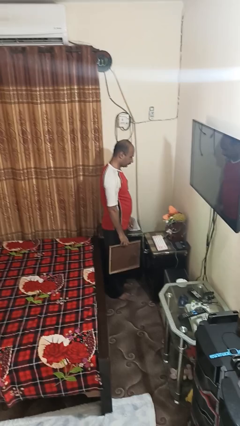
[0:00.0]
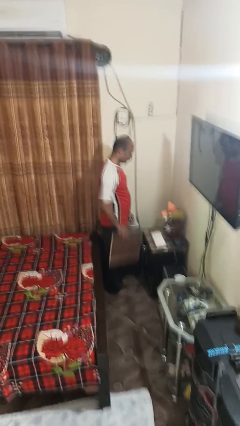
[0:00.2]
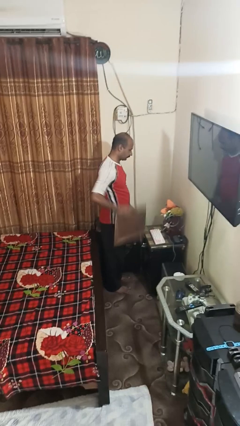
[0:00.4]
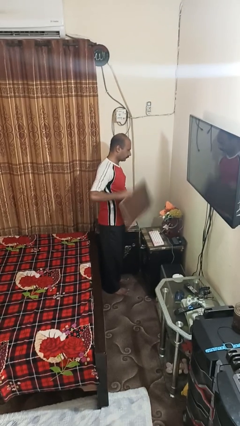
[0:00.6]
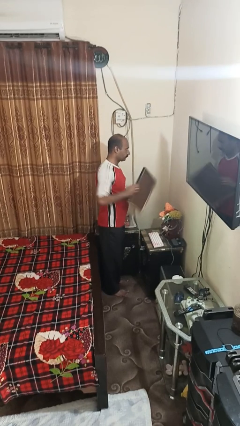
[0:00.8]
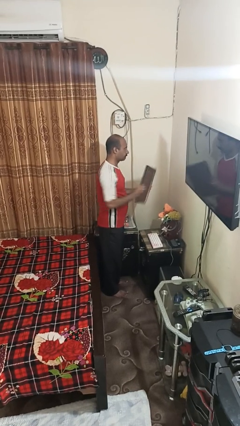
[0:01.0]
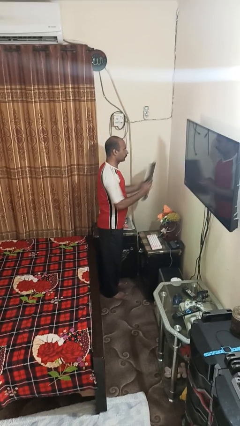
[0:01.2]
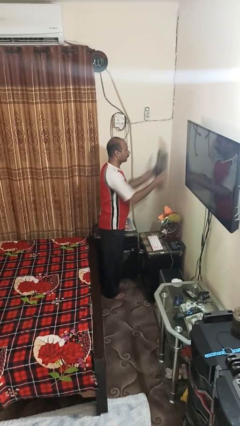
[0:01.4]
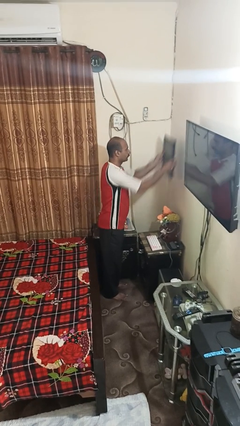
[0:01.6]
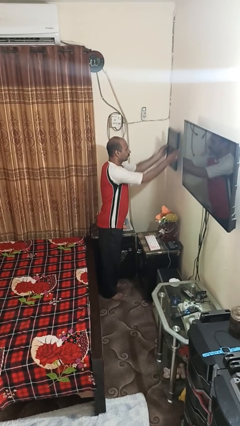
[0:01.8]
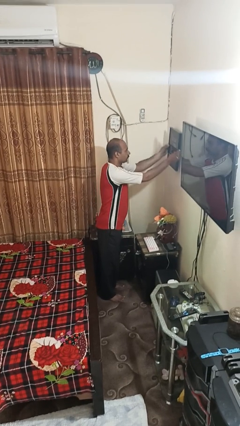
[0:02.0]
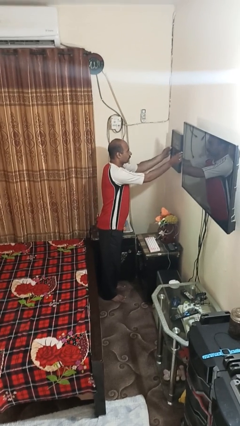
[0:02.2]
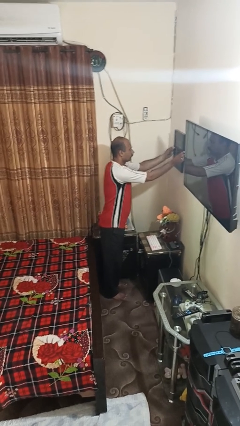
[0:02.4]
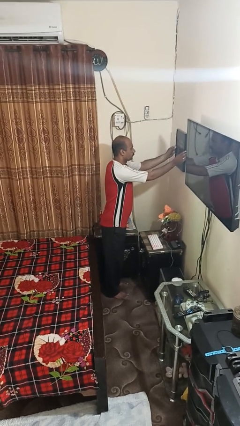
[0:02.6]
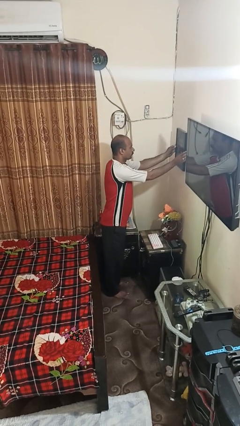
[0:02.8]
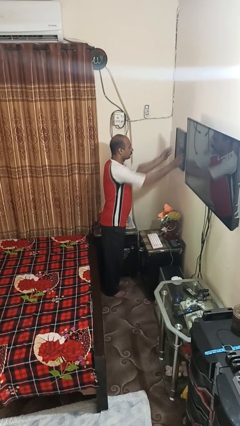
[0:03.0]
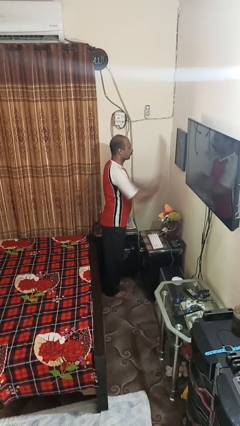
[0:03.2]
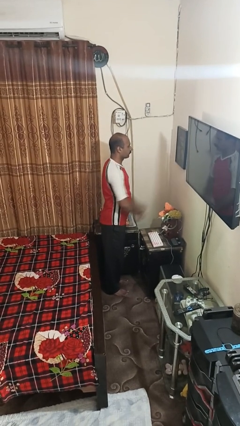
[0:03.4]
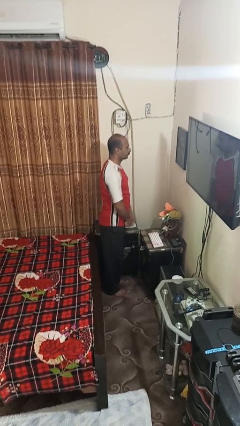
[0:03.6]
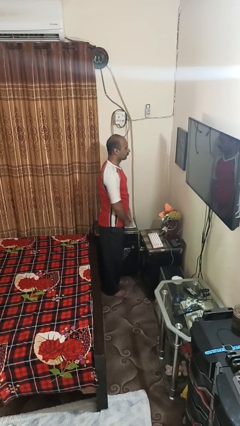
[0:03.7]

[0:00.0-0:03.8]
person puts up picture frame

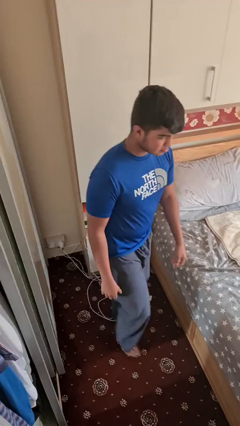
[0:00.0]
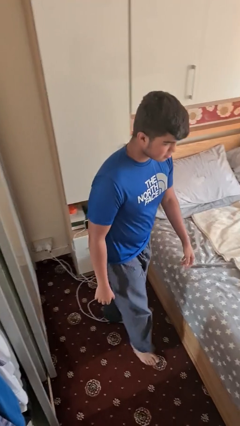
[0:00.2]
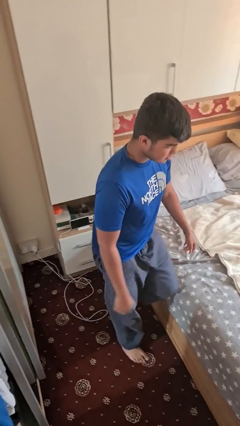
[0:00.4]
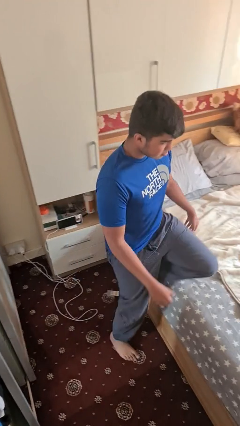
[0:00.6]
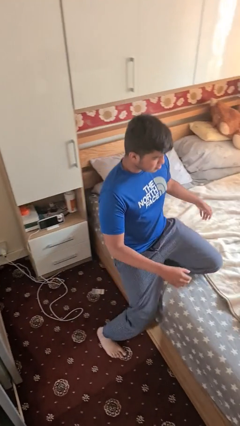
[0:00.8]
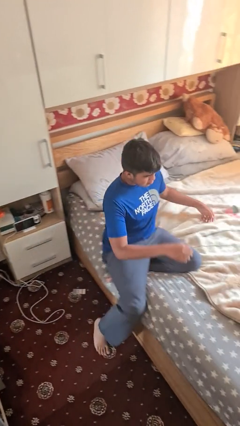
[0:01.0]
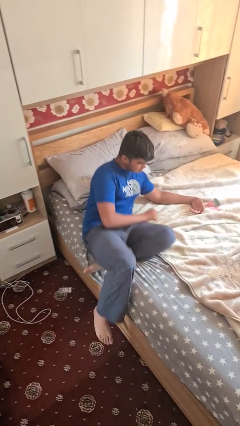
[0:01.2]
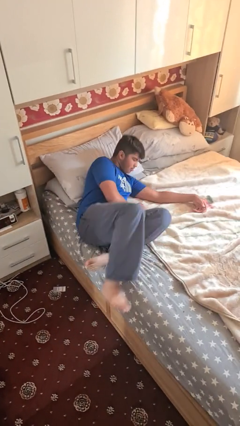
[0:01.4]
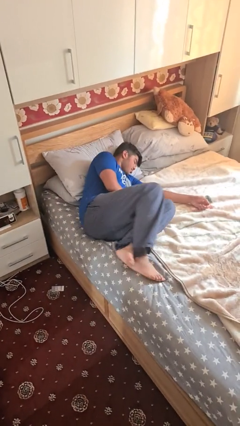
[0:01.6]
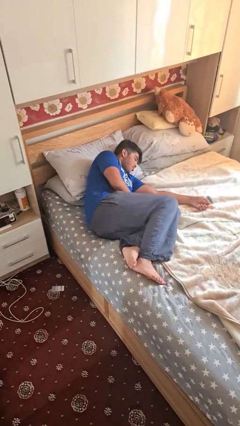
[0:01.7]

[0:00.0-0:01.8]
person lies down on bed

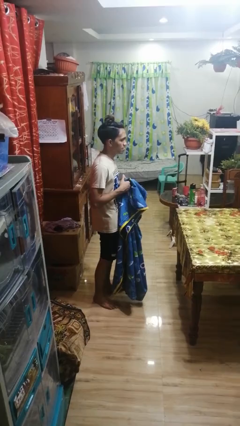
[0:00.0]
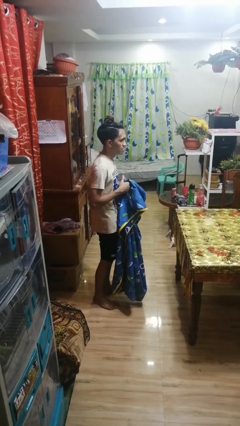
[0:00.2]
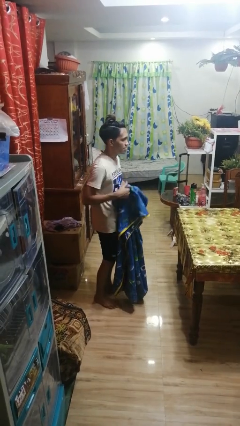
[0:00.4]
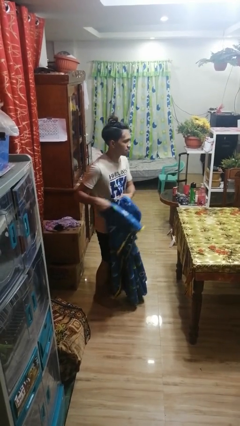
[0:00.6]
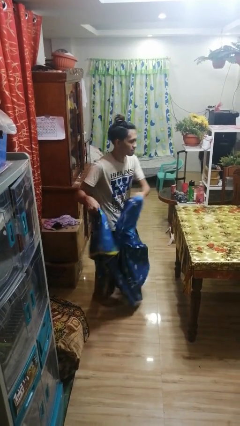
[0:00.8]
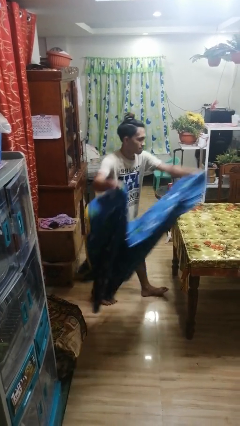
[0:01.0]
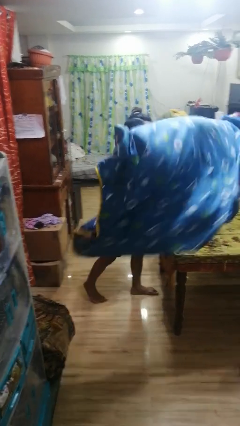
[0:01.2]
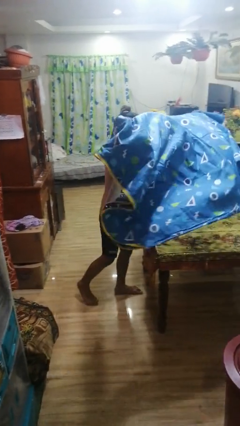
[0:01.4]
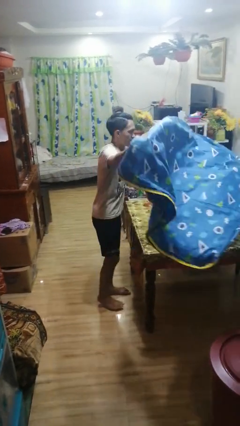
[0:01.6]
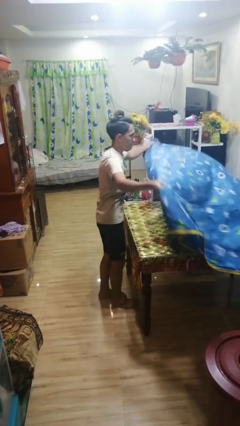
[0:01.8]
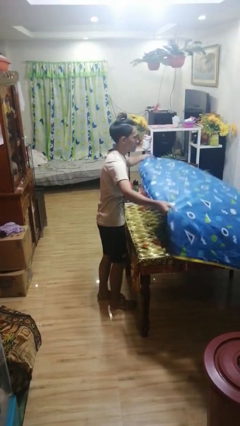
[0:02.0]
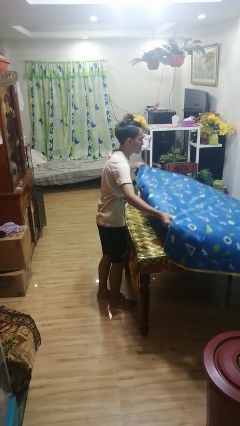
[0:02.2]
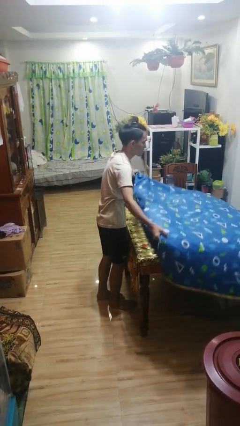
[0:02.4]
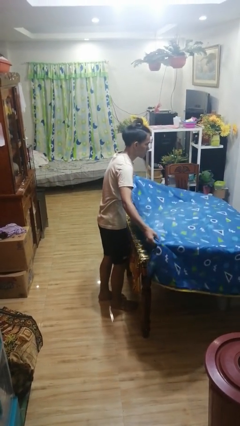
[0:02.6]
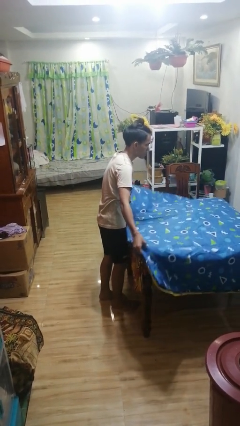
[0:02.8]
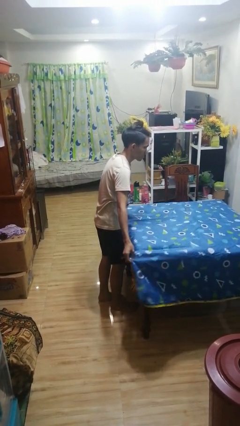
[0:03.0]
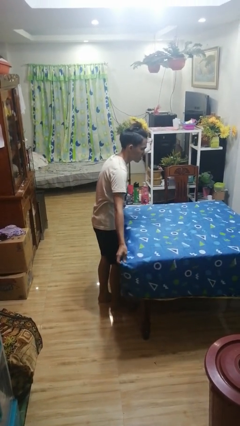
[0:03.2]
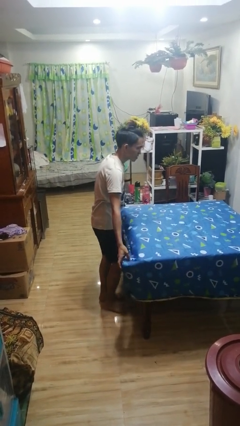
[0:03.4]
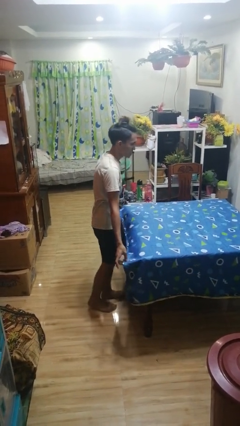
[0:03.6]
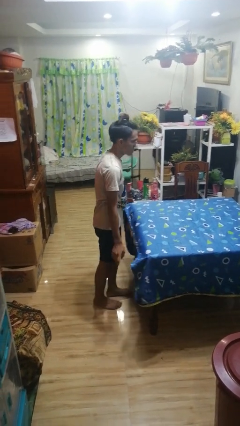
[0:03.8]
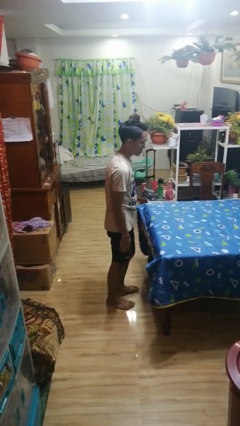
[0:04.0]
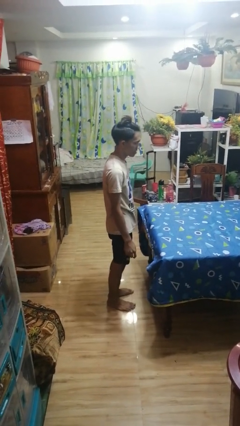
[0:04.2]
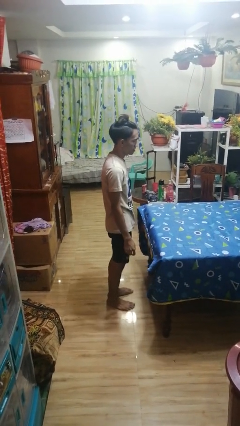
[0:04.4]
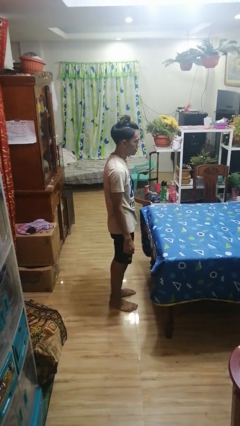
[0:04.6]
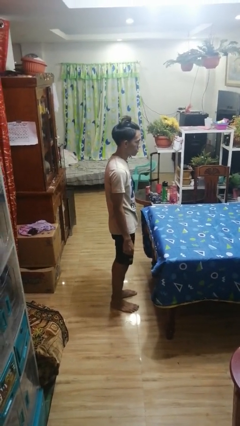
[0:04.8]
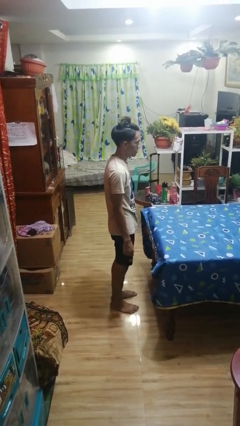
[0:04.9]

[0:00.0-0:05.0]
person spreads tablecloth

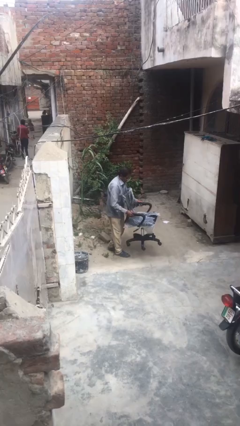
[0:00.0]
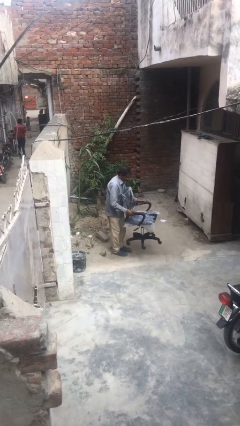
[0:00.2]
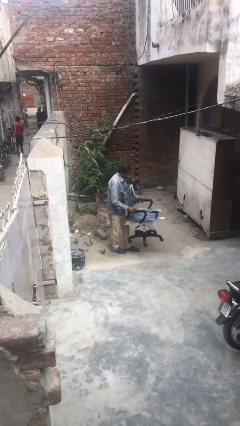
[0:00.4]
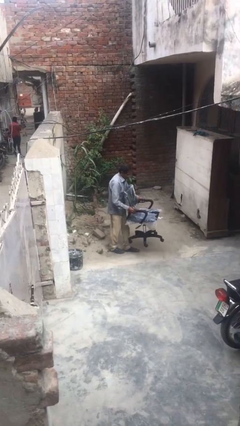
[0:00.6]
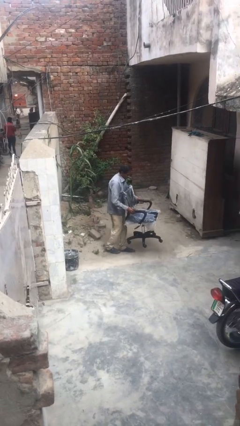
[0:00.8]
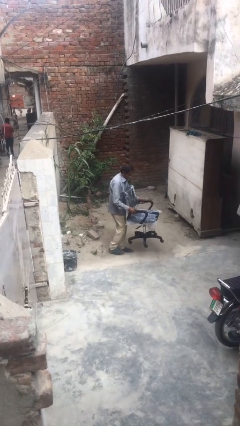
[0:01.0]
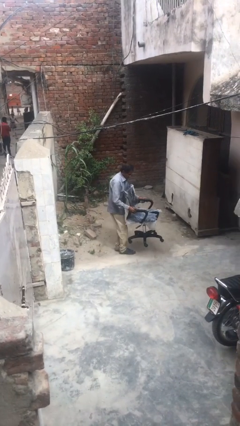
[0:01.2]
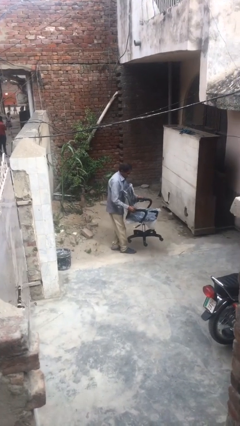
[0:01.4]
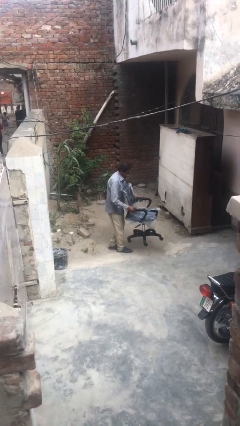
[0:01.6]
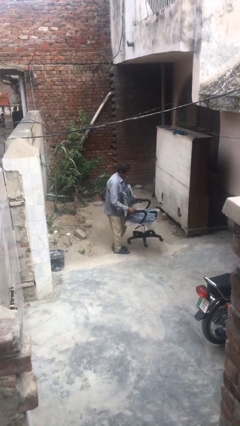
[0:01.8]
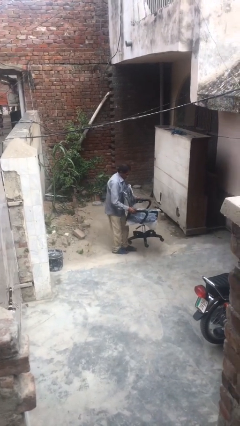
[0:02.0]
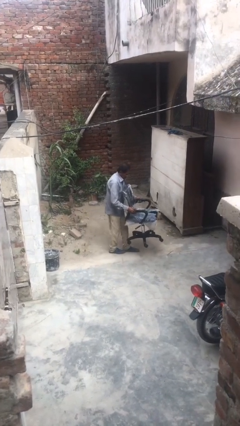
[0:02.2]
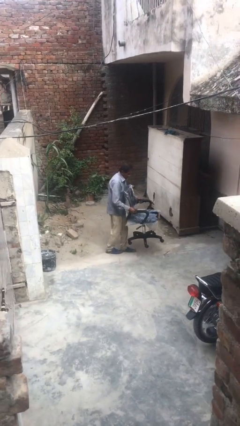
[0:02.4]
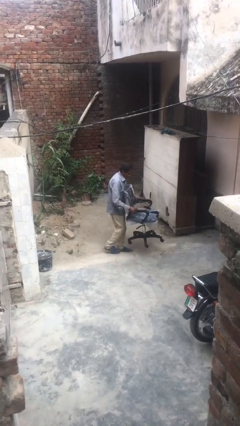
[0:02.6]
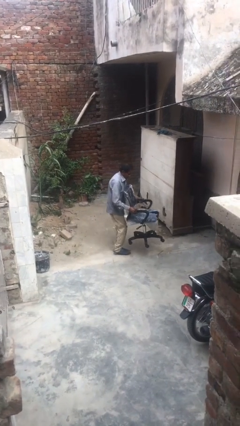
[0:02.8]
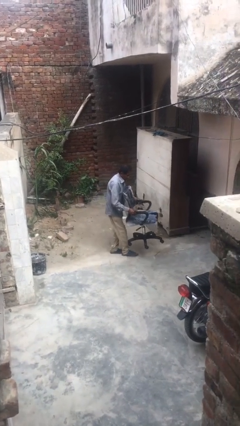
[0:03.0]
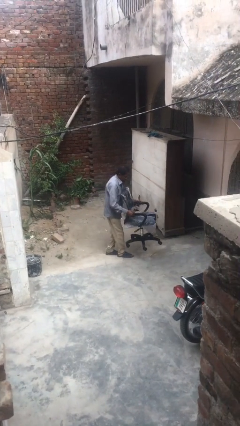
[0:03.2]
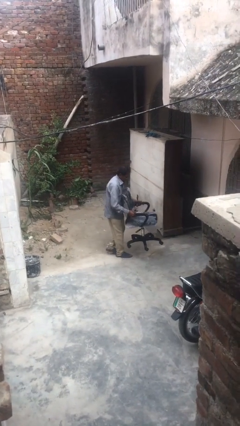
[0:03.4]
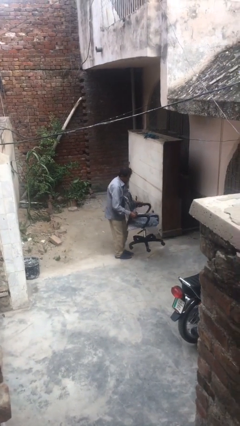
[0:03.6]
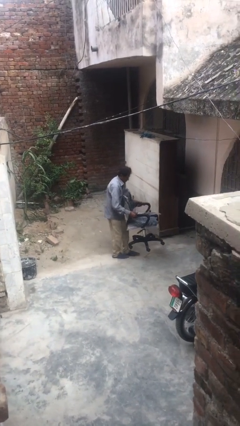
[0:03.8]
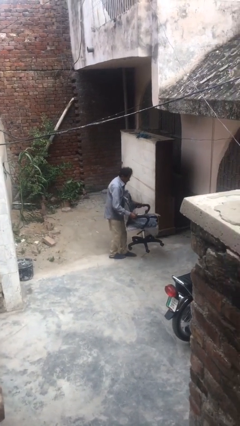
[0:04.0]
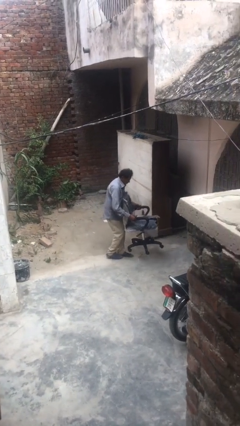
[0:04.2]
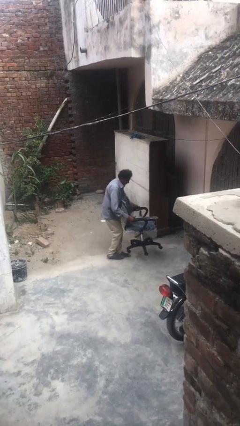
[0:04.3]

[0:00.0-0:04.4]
person carries heavy object

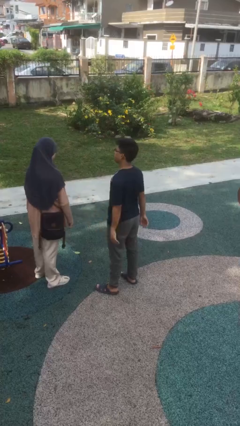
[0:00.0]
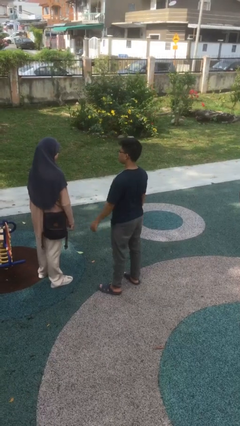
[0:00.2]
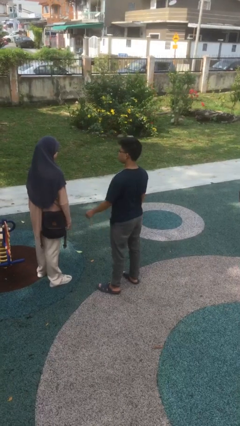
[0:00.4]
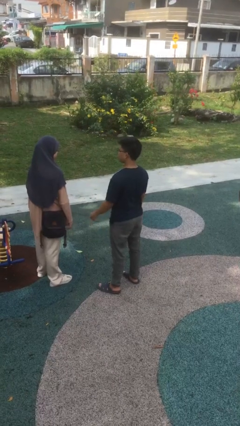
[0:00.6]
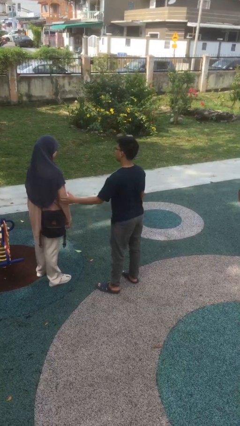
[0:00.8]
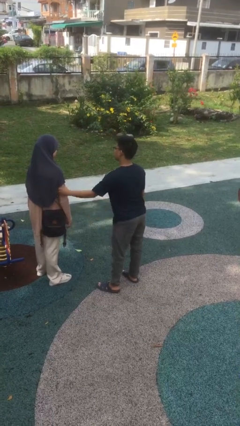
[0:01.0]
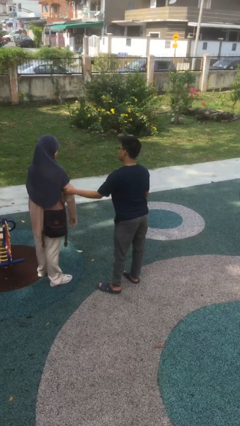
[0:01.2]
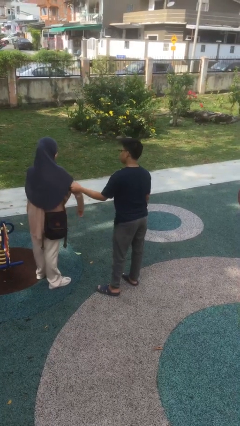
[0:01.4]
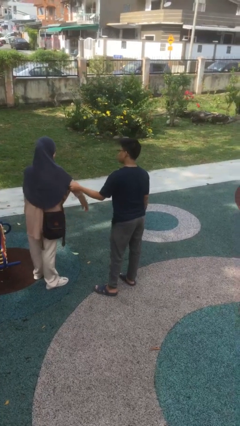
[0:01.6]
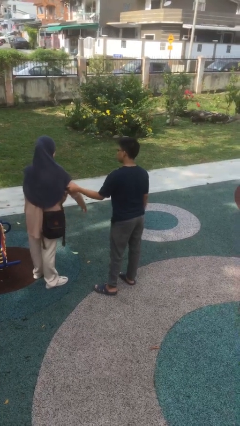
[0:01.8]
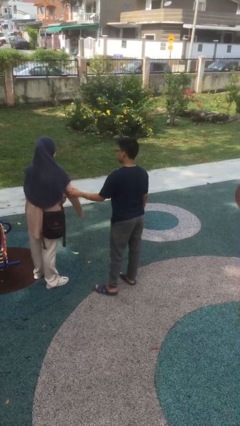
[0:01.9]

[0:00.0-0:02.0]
person grabs person by bicep

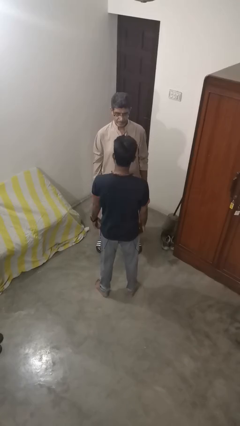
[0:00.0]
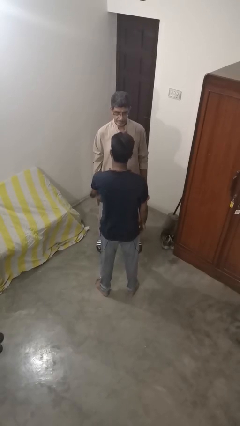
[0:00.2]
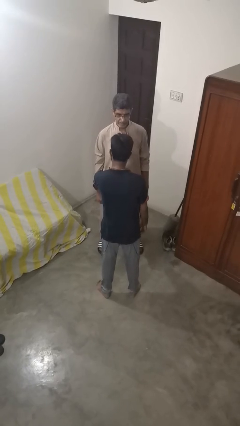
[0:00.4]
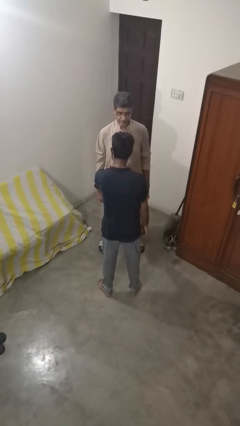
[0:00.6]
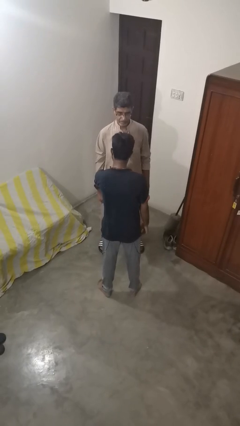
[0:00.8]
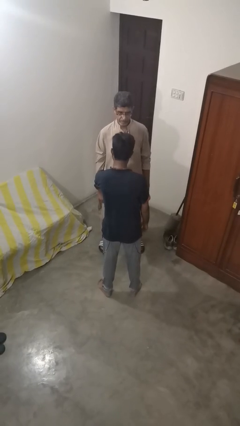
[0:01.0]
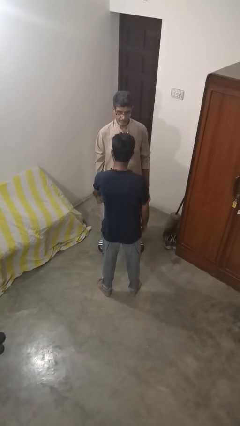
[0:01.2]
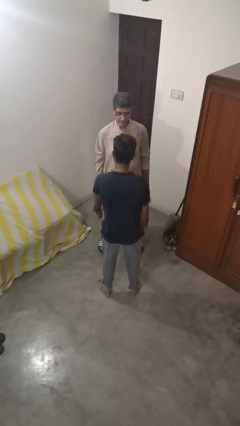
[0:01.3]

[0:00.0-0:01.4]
person grabs person by forearm
